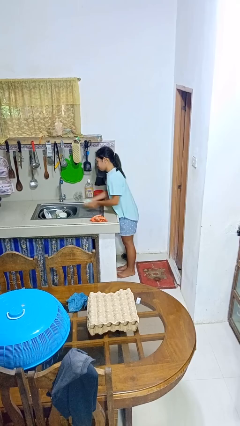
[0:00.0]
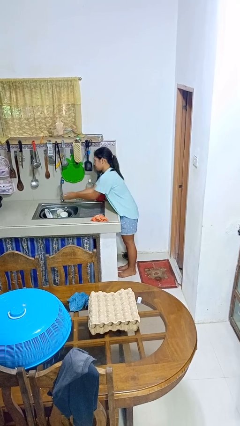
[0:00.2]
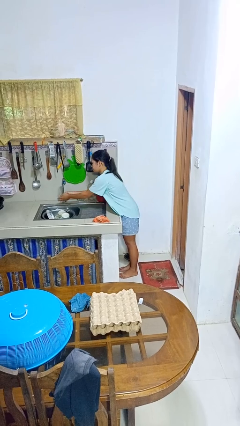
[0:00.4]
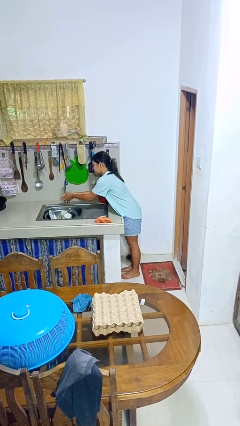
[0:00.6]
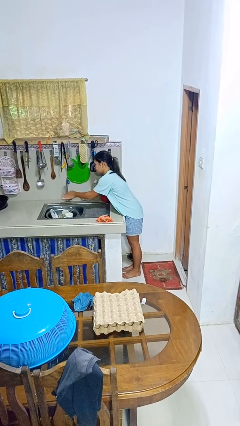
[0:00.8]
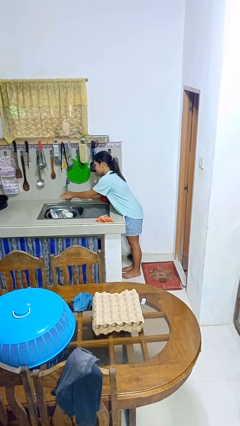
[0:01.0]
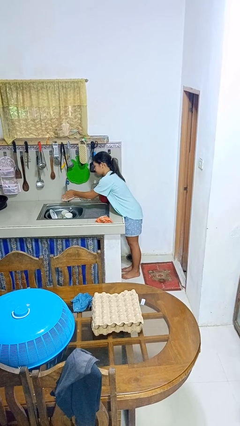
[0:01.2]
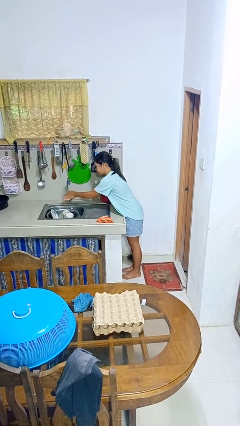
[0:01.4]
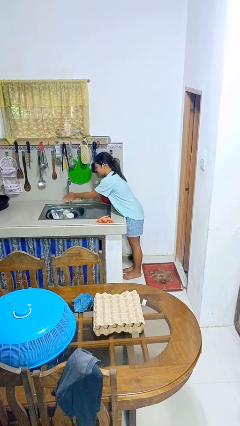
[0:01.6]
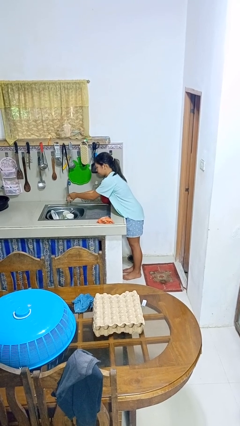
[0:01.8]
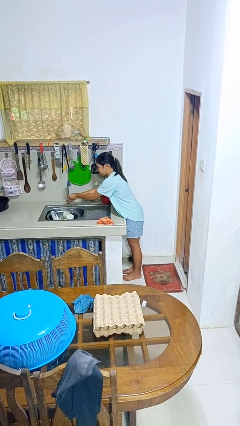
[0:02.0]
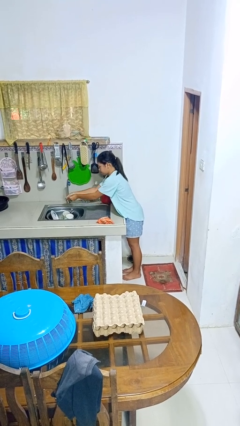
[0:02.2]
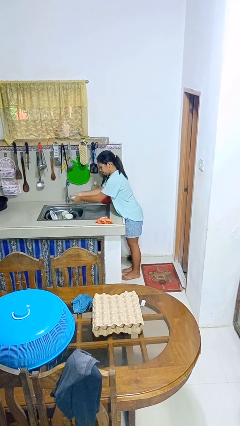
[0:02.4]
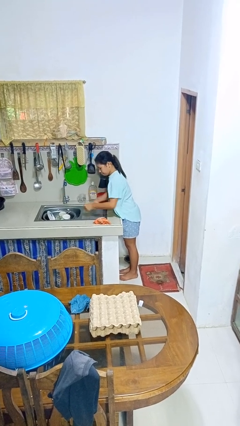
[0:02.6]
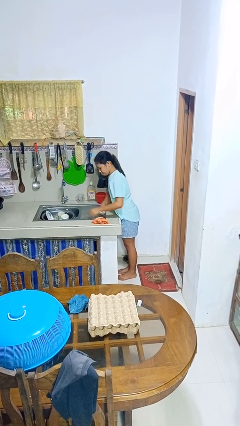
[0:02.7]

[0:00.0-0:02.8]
person washes hands

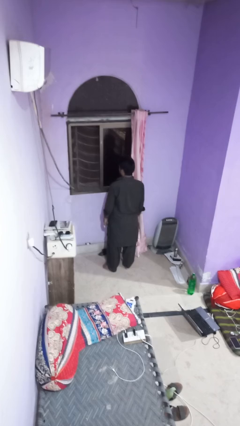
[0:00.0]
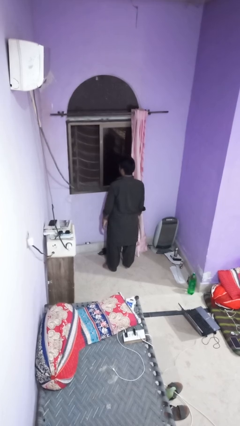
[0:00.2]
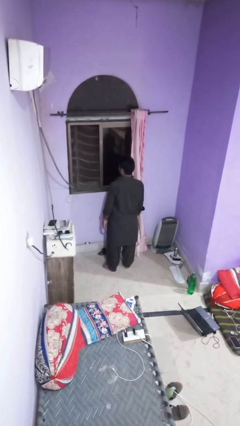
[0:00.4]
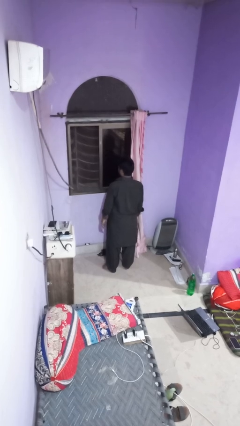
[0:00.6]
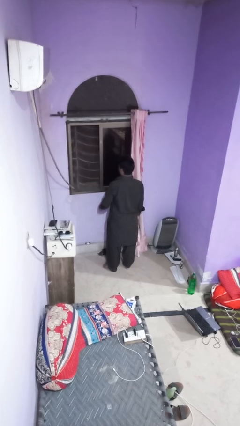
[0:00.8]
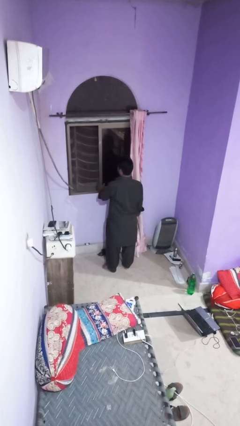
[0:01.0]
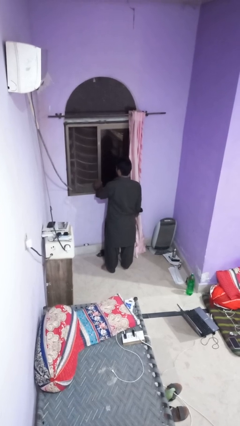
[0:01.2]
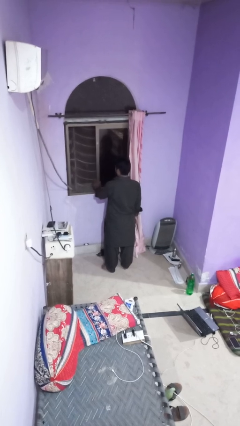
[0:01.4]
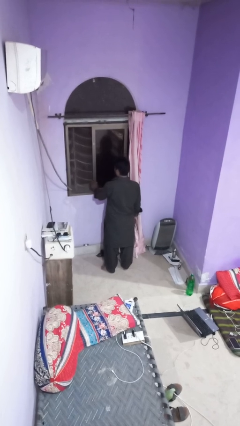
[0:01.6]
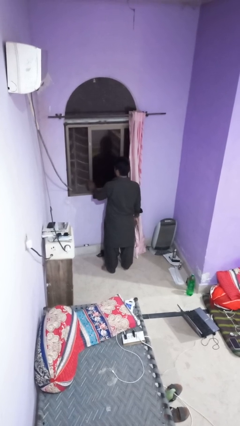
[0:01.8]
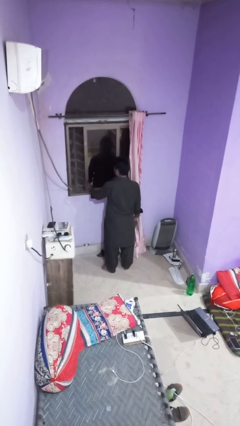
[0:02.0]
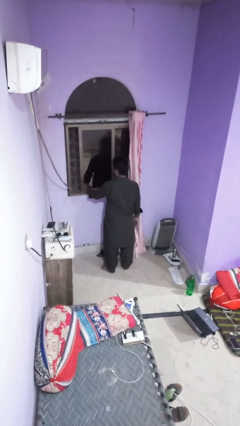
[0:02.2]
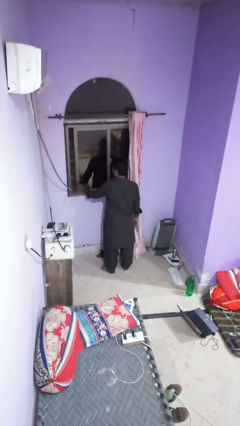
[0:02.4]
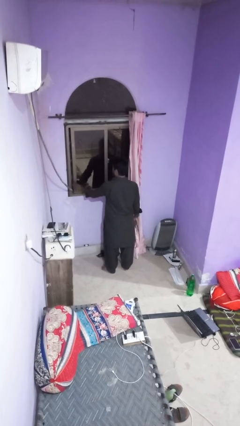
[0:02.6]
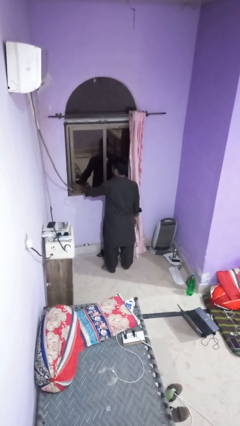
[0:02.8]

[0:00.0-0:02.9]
person closes home window

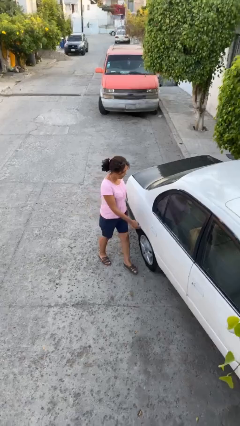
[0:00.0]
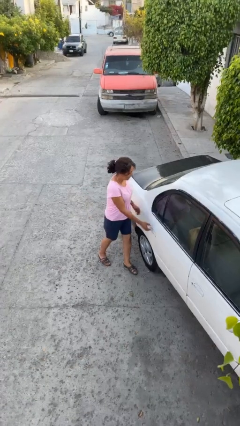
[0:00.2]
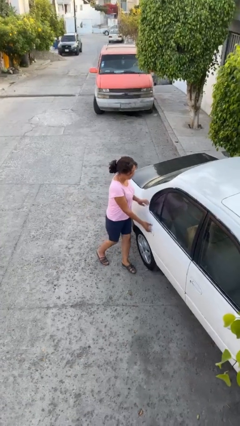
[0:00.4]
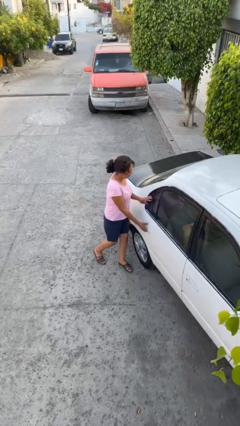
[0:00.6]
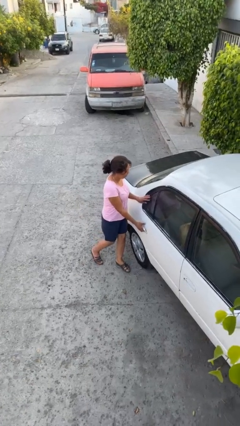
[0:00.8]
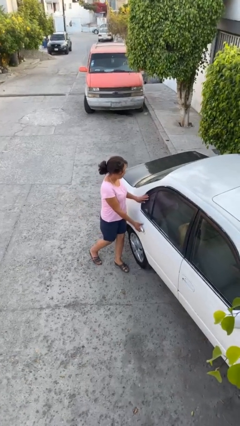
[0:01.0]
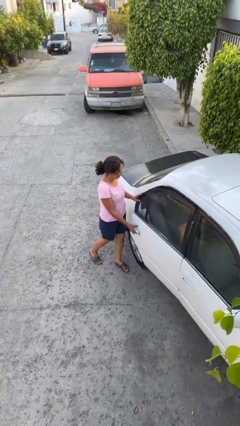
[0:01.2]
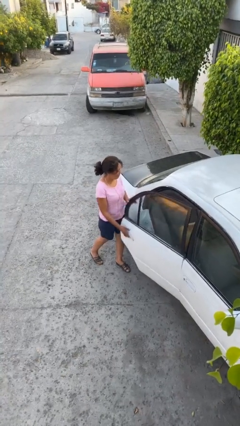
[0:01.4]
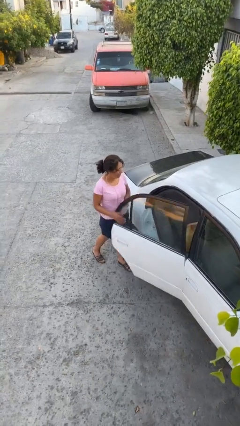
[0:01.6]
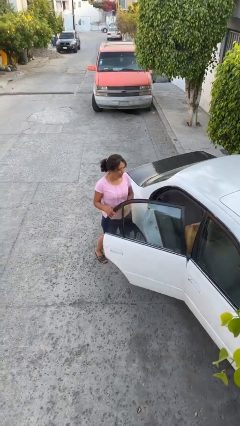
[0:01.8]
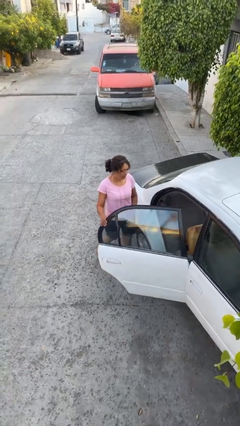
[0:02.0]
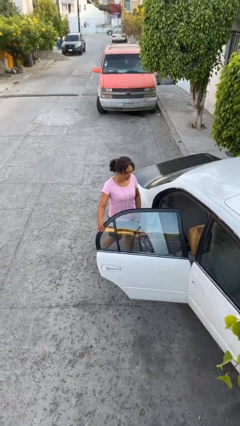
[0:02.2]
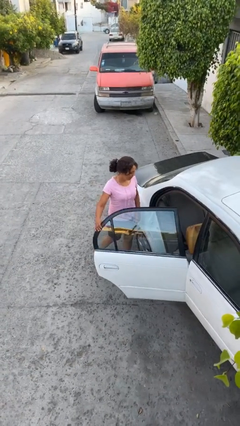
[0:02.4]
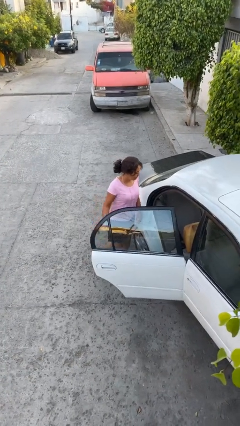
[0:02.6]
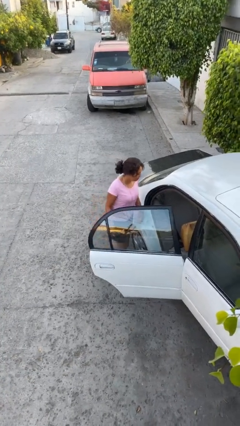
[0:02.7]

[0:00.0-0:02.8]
person opens car door

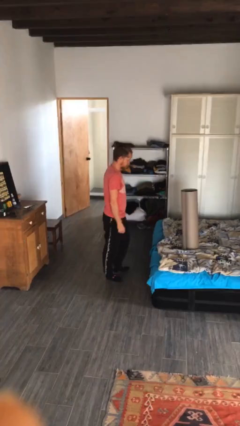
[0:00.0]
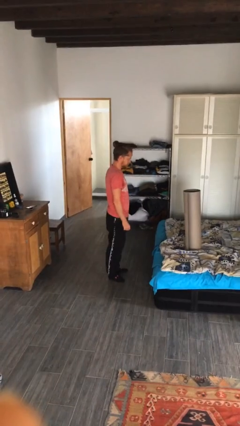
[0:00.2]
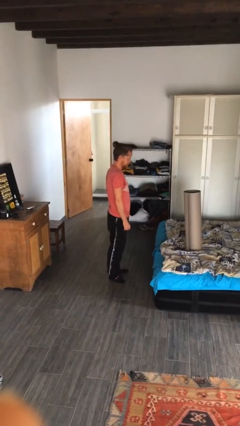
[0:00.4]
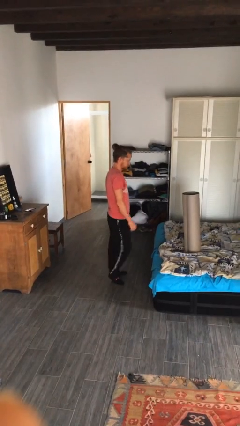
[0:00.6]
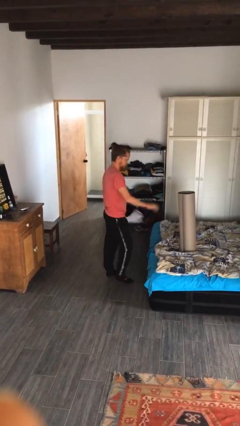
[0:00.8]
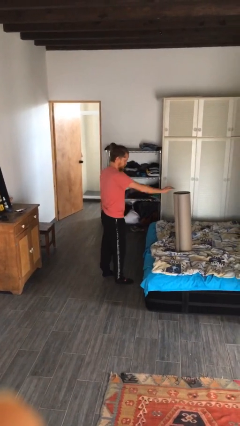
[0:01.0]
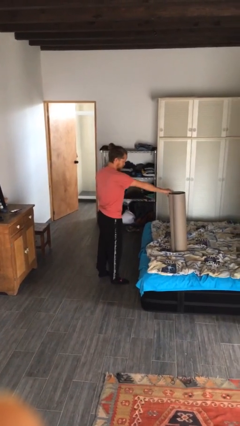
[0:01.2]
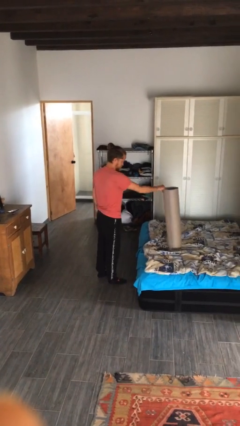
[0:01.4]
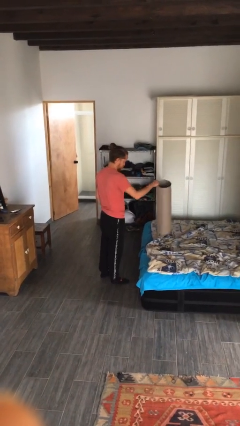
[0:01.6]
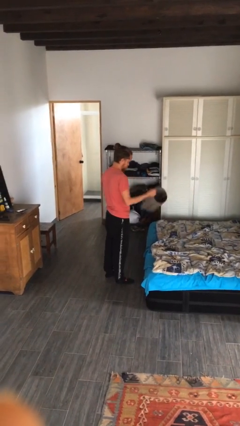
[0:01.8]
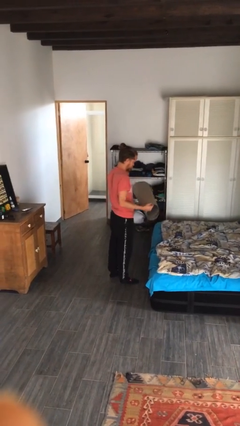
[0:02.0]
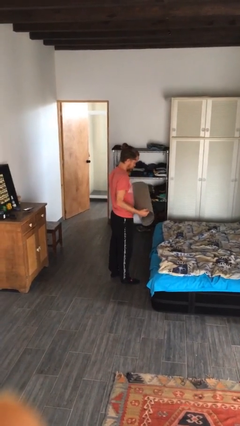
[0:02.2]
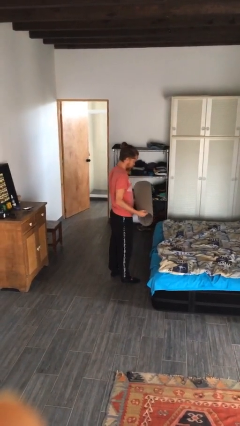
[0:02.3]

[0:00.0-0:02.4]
person picks up object from bed

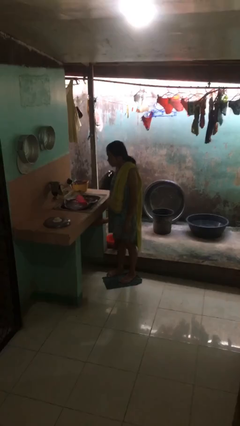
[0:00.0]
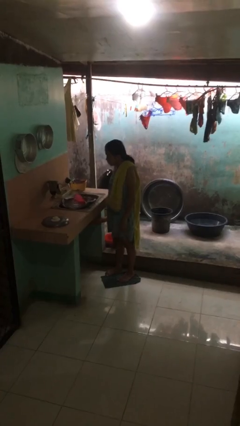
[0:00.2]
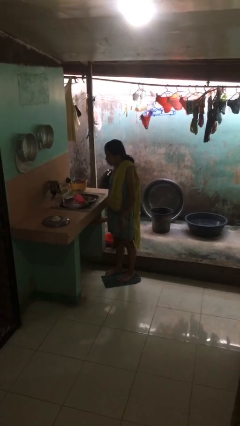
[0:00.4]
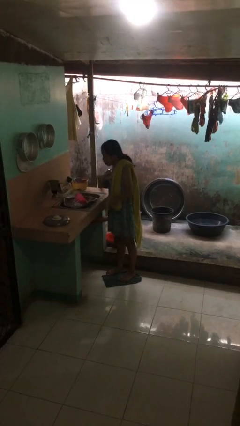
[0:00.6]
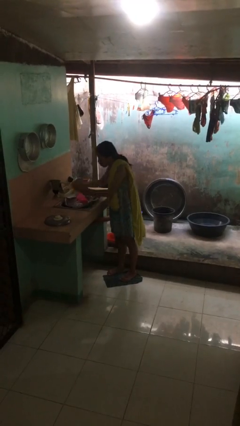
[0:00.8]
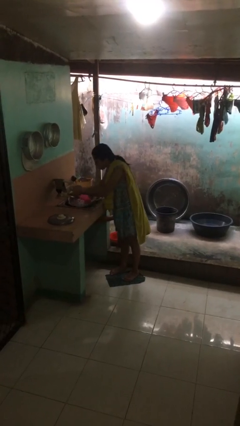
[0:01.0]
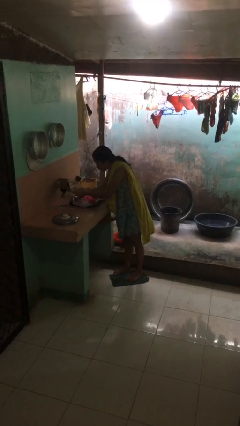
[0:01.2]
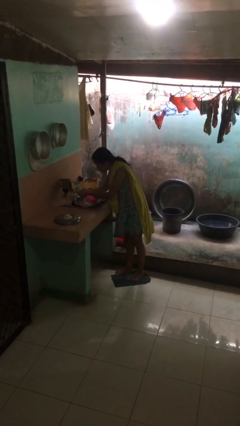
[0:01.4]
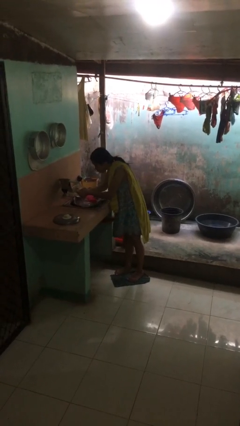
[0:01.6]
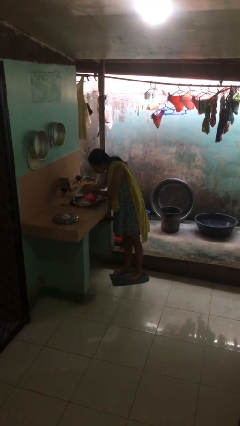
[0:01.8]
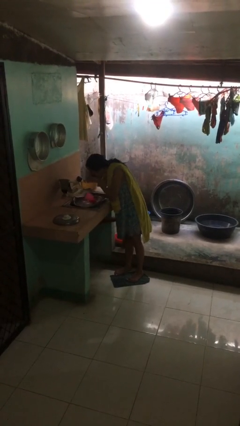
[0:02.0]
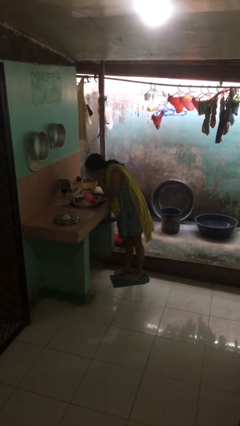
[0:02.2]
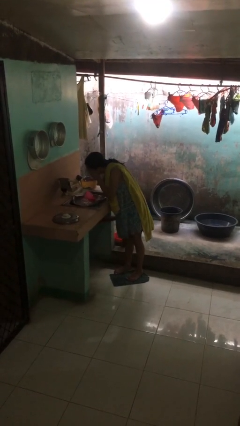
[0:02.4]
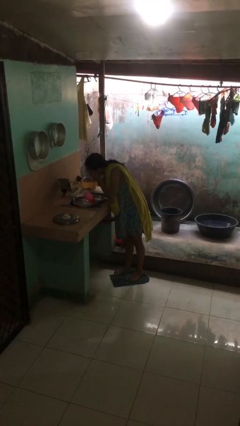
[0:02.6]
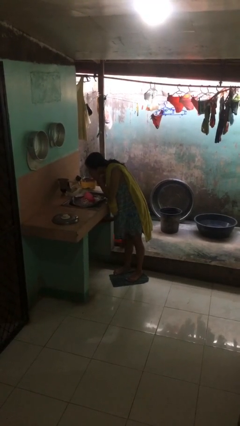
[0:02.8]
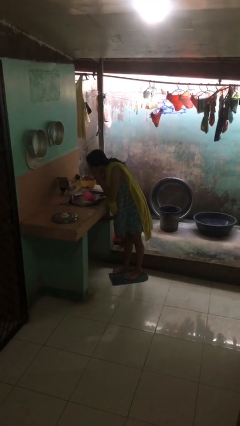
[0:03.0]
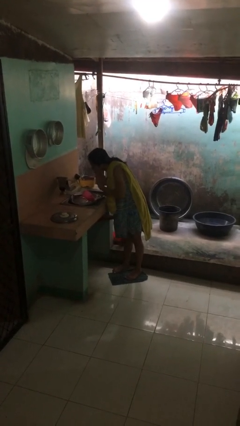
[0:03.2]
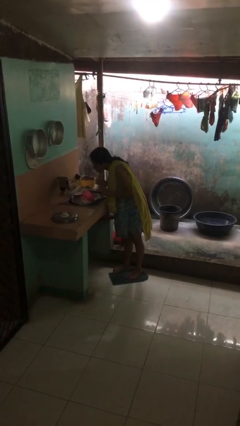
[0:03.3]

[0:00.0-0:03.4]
person washes face

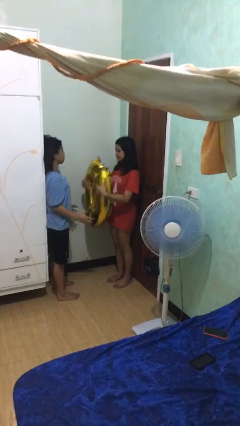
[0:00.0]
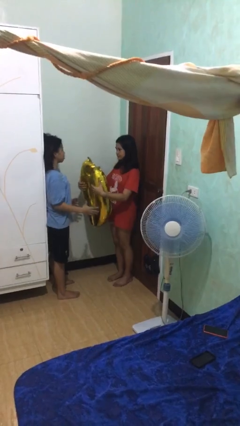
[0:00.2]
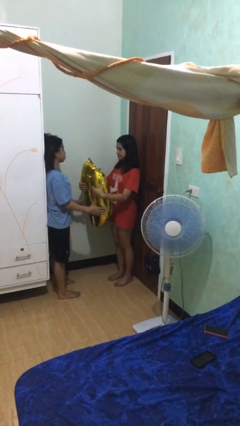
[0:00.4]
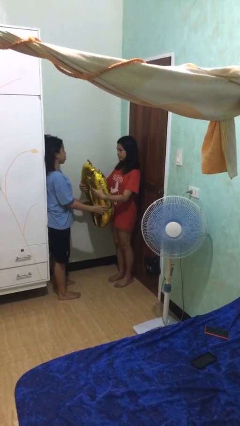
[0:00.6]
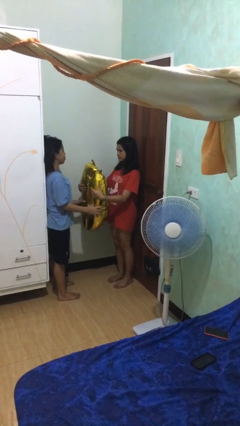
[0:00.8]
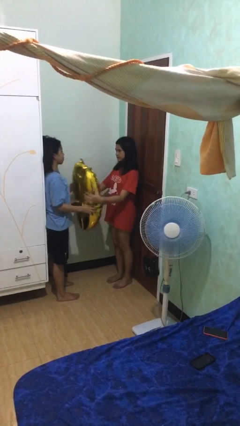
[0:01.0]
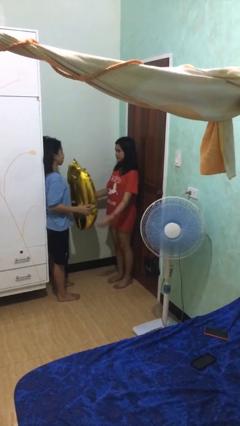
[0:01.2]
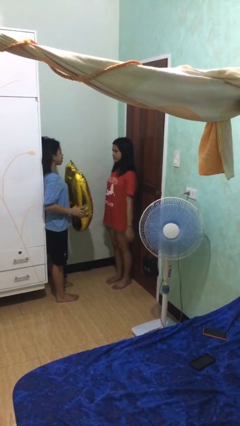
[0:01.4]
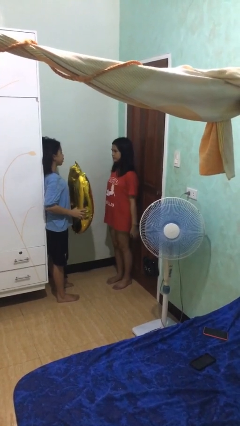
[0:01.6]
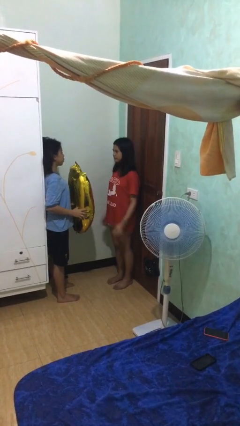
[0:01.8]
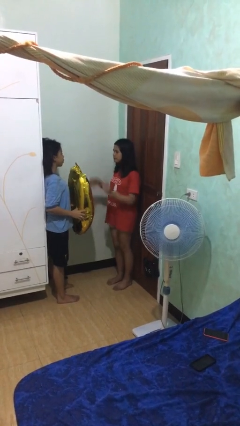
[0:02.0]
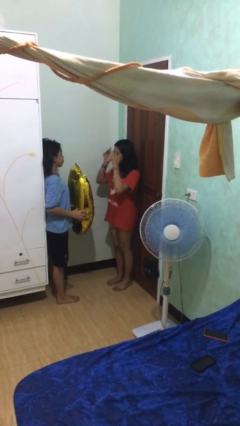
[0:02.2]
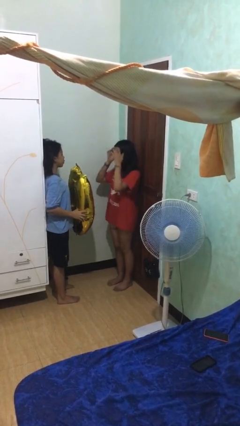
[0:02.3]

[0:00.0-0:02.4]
person transfers object to person

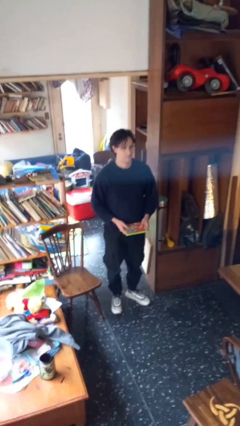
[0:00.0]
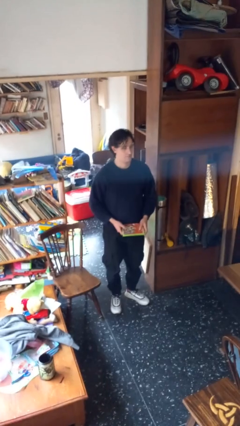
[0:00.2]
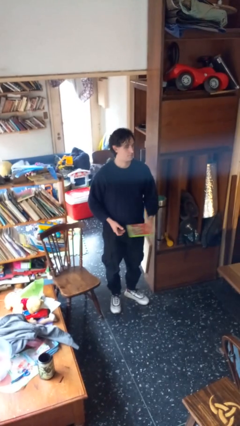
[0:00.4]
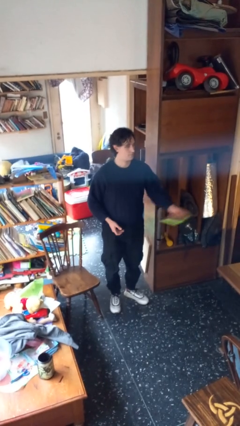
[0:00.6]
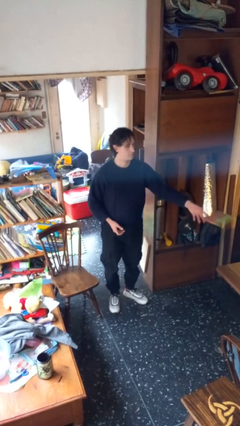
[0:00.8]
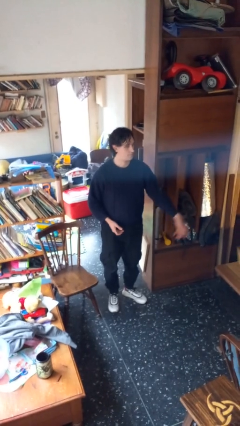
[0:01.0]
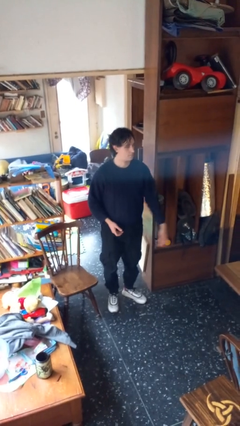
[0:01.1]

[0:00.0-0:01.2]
person throws object on table

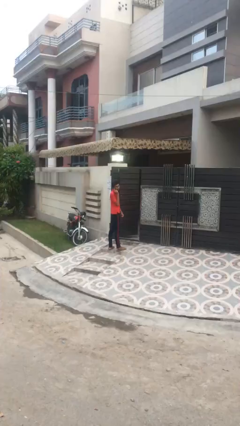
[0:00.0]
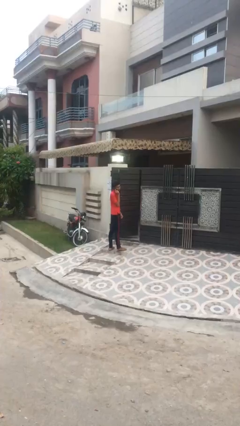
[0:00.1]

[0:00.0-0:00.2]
person exits scene through structure
